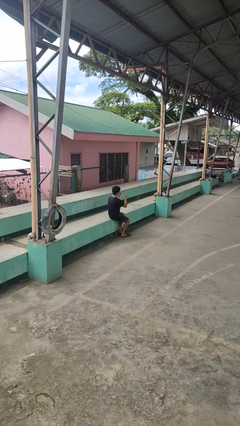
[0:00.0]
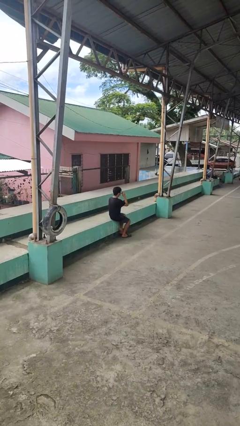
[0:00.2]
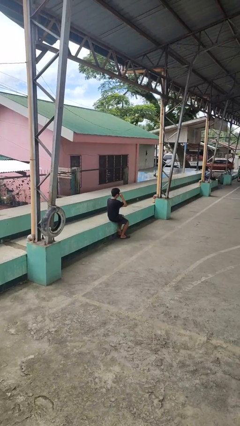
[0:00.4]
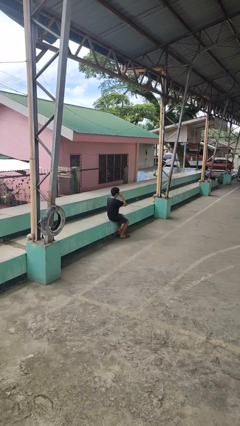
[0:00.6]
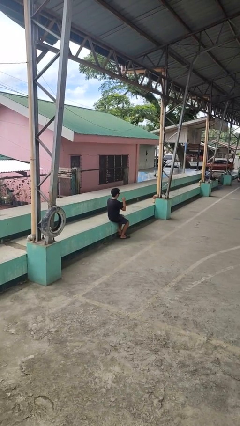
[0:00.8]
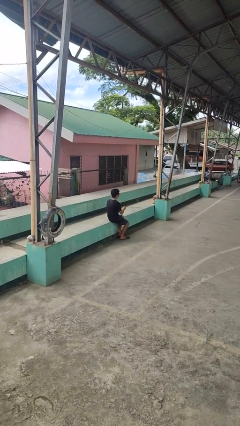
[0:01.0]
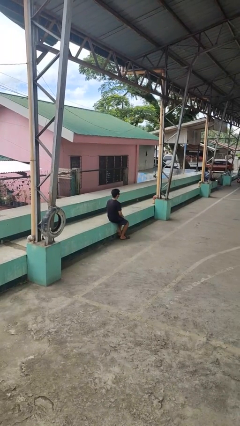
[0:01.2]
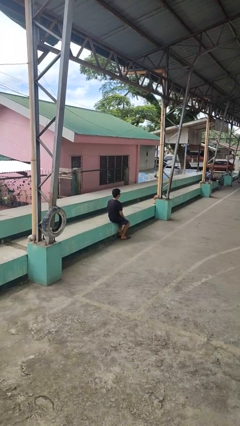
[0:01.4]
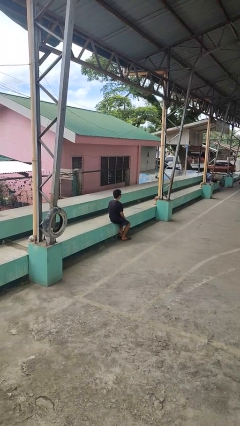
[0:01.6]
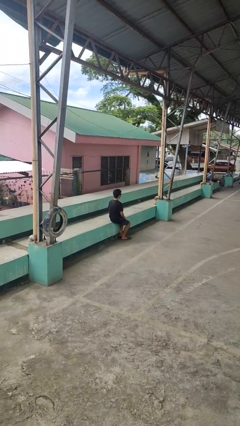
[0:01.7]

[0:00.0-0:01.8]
person puts on sunglasses

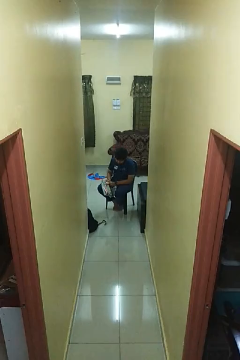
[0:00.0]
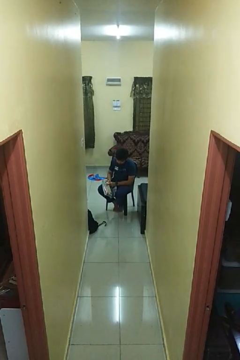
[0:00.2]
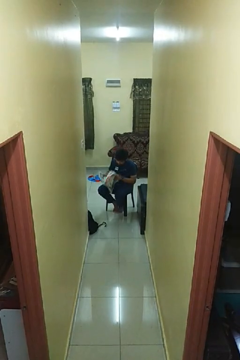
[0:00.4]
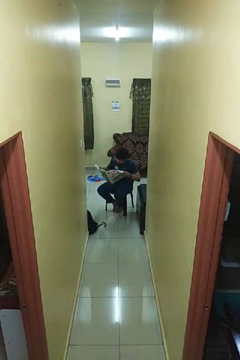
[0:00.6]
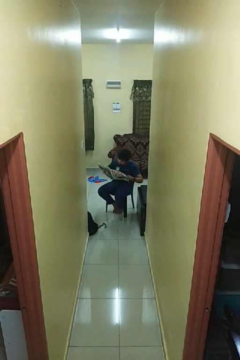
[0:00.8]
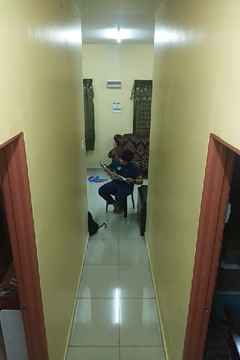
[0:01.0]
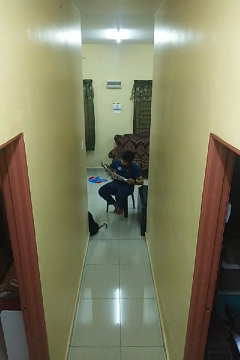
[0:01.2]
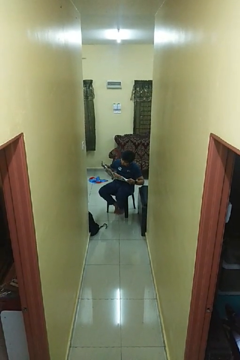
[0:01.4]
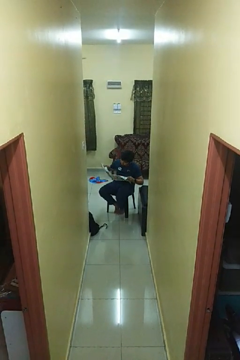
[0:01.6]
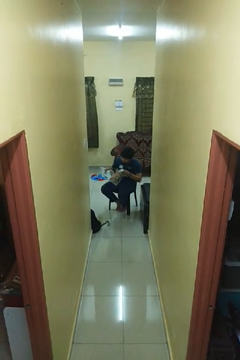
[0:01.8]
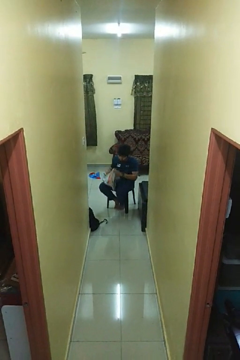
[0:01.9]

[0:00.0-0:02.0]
person reads newspaper

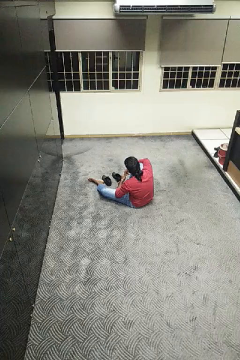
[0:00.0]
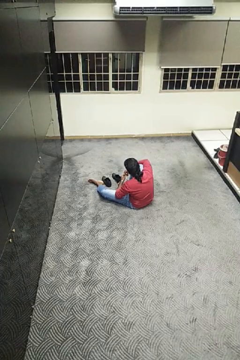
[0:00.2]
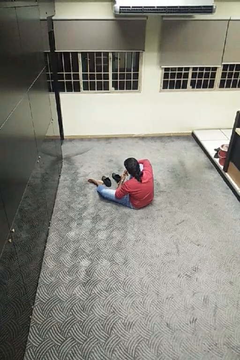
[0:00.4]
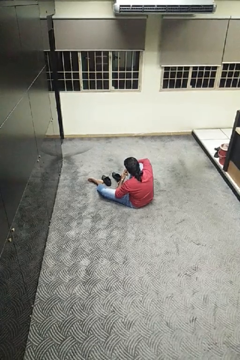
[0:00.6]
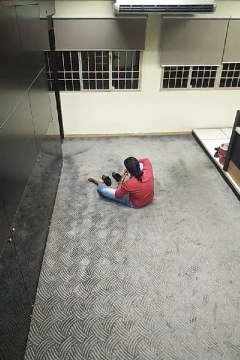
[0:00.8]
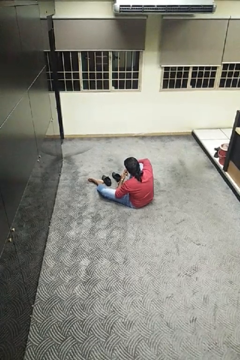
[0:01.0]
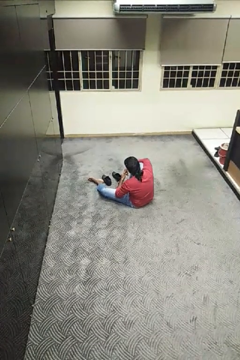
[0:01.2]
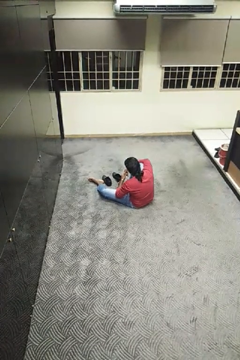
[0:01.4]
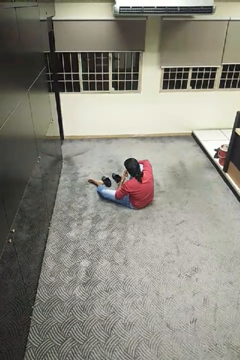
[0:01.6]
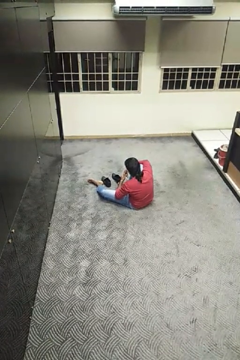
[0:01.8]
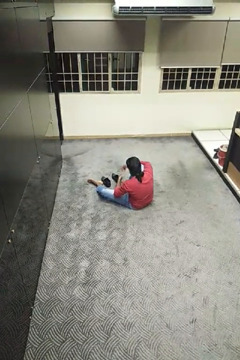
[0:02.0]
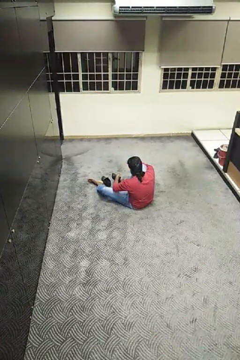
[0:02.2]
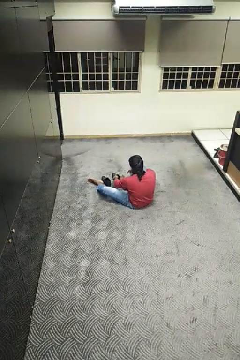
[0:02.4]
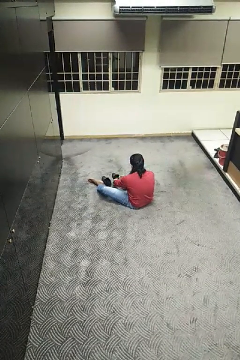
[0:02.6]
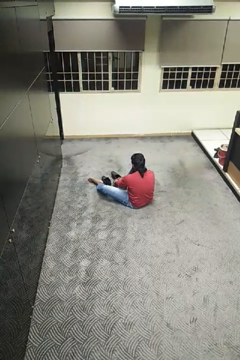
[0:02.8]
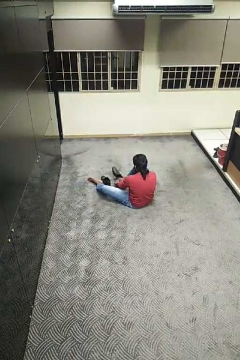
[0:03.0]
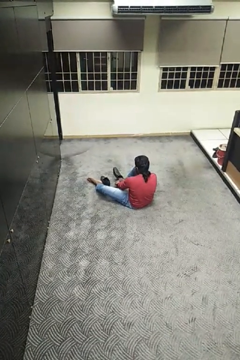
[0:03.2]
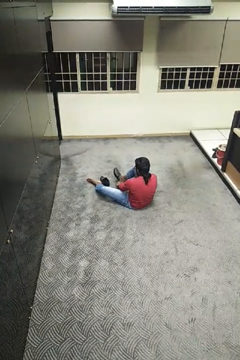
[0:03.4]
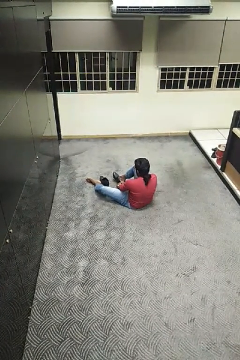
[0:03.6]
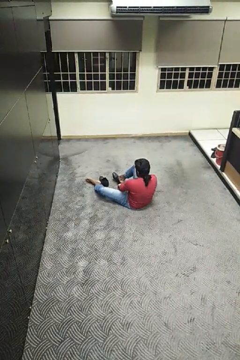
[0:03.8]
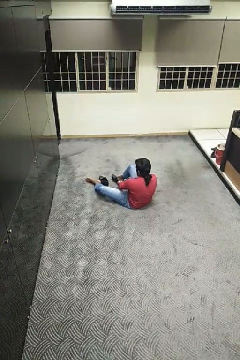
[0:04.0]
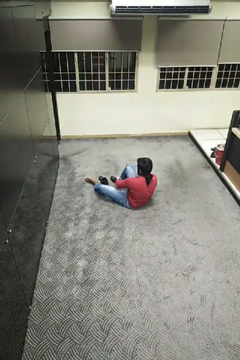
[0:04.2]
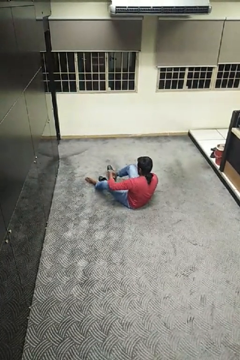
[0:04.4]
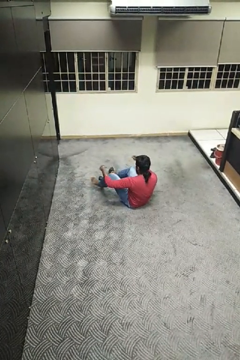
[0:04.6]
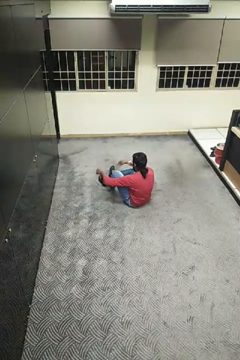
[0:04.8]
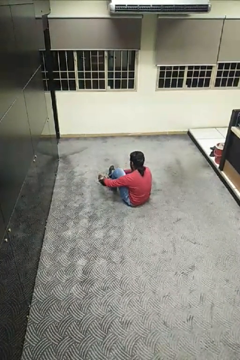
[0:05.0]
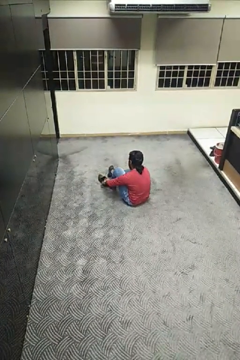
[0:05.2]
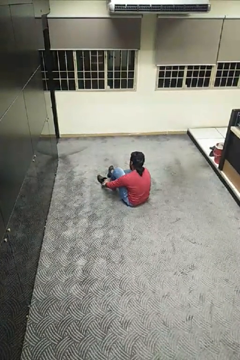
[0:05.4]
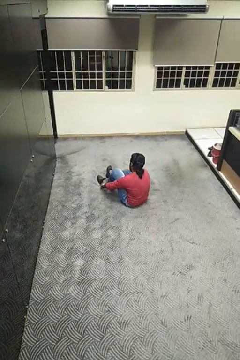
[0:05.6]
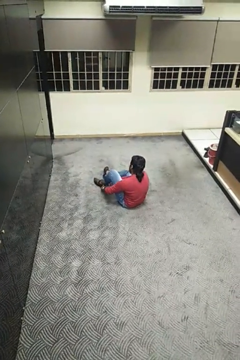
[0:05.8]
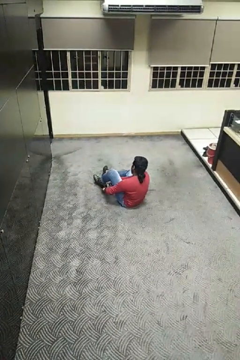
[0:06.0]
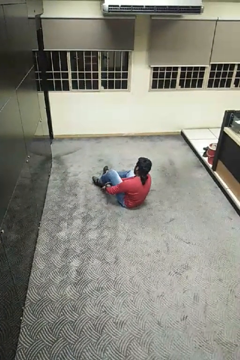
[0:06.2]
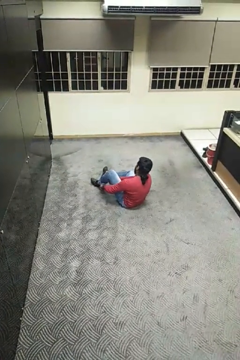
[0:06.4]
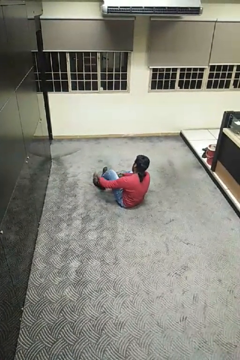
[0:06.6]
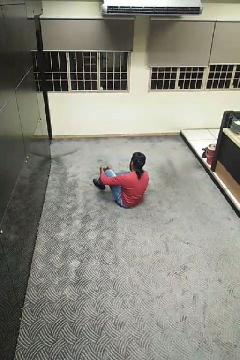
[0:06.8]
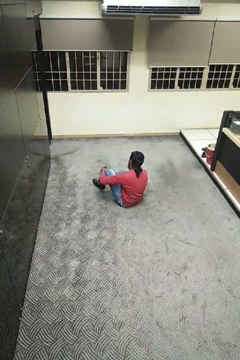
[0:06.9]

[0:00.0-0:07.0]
person puts on shoes

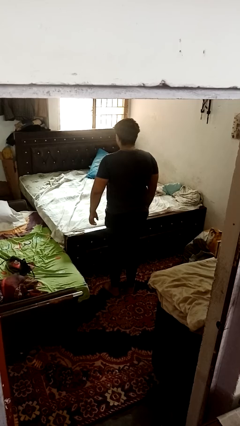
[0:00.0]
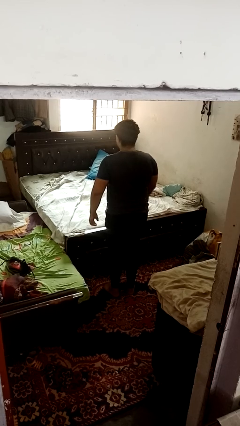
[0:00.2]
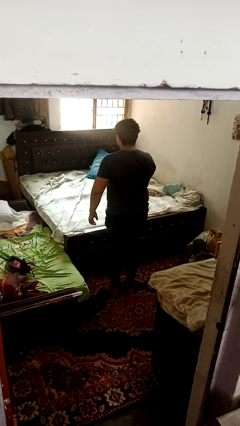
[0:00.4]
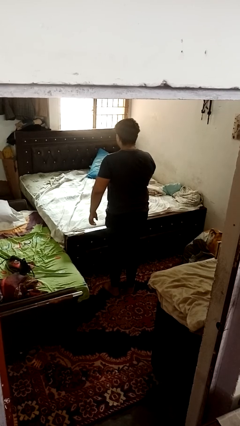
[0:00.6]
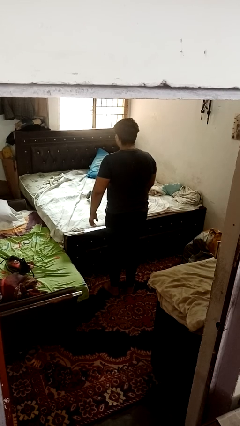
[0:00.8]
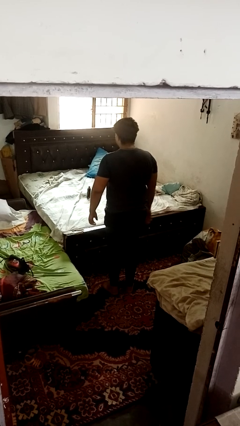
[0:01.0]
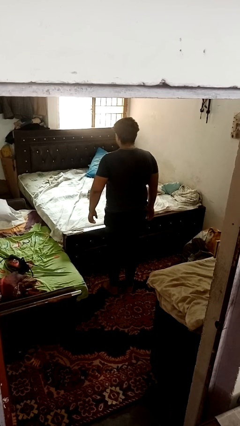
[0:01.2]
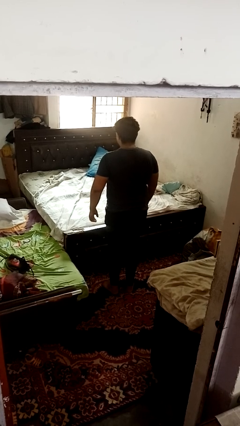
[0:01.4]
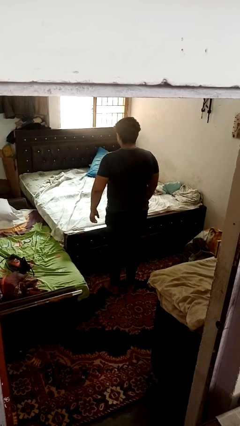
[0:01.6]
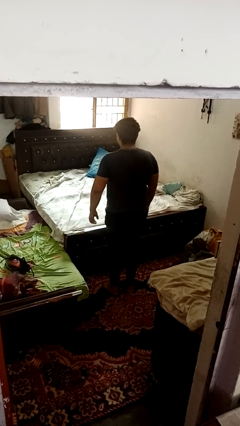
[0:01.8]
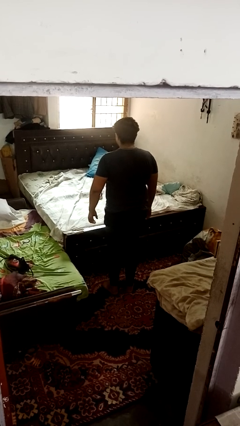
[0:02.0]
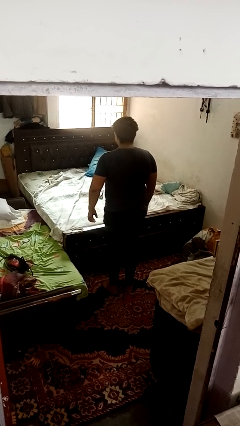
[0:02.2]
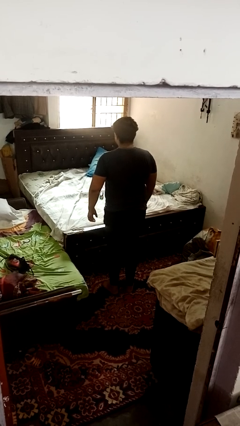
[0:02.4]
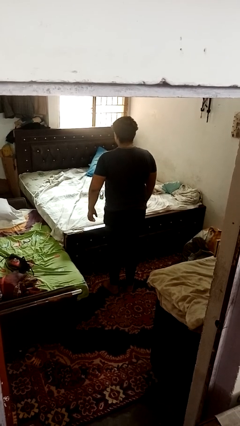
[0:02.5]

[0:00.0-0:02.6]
person throws object on bed

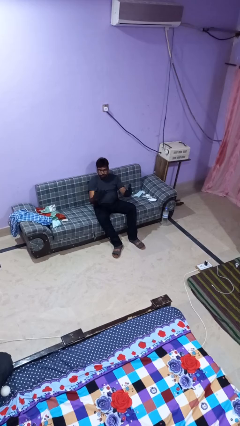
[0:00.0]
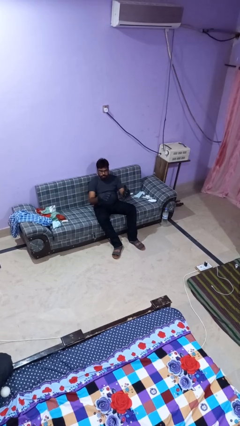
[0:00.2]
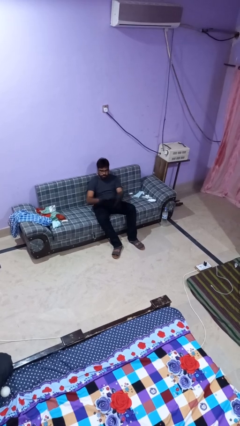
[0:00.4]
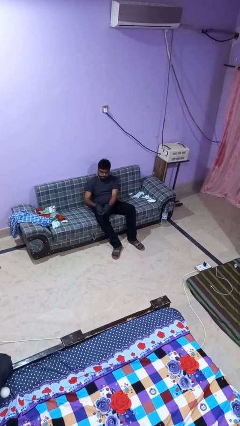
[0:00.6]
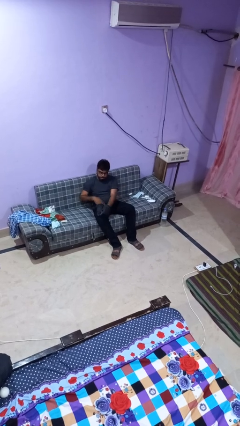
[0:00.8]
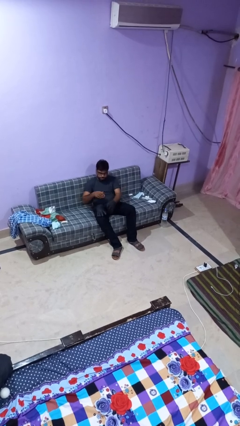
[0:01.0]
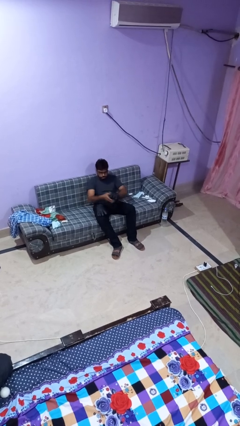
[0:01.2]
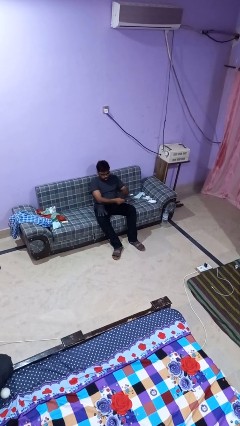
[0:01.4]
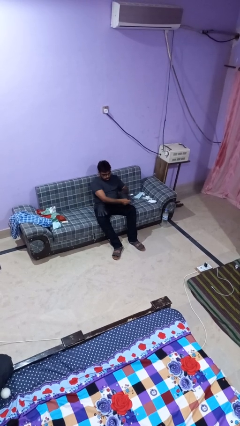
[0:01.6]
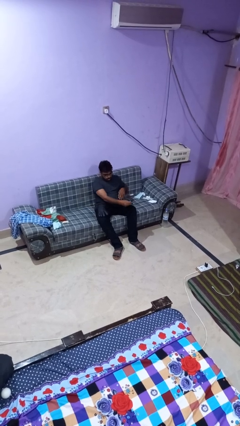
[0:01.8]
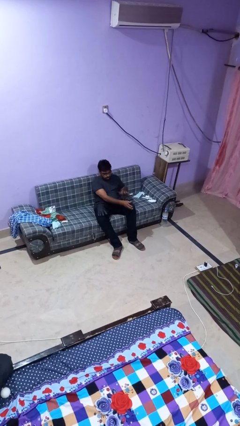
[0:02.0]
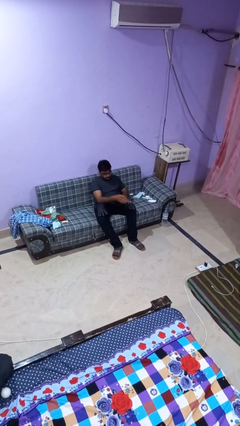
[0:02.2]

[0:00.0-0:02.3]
person takes off gloves

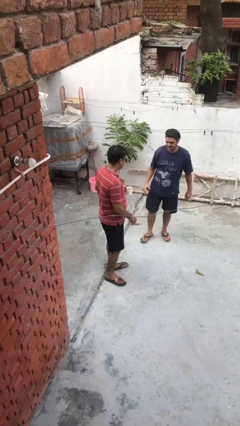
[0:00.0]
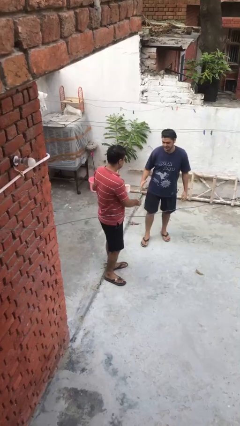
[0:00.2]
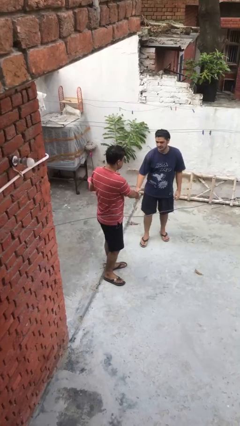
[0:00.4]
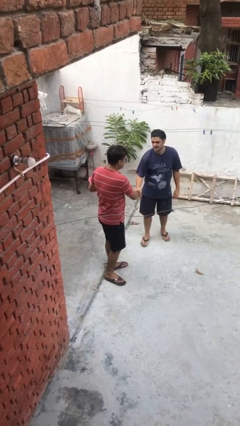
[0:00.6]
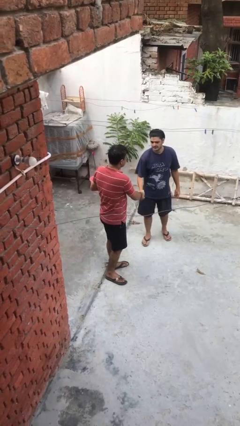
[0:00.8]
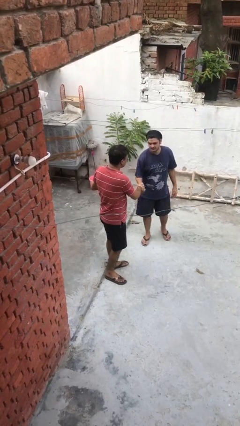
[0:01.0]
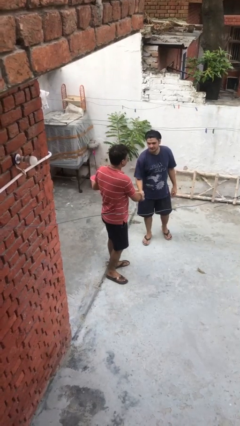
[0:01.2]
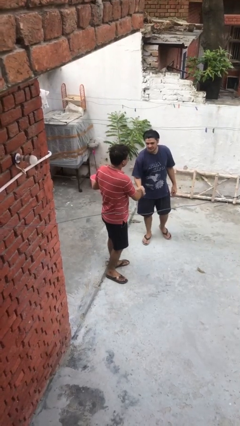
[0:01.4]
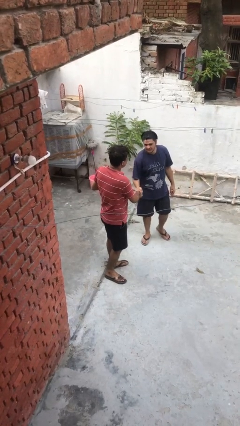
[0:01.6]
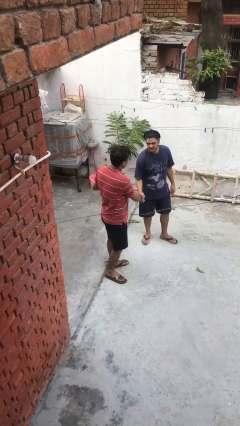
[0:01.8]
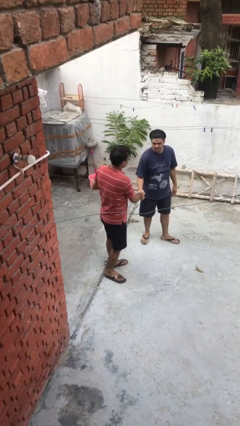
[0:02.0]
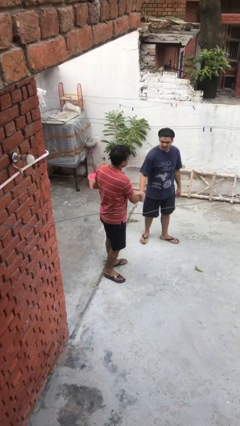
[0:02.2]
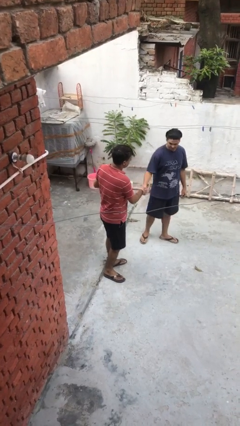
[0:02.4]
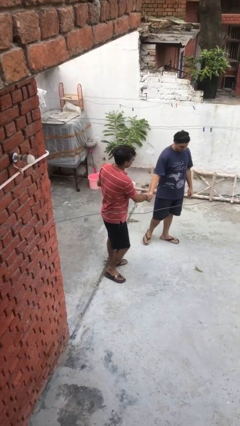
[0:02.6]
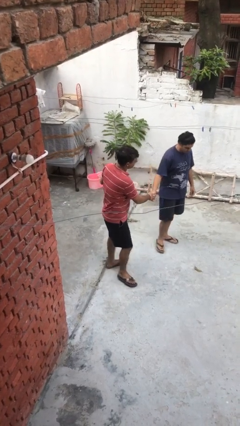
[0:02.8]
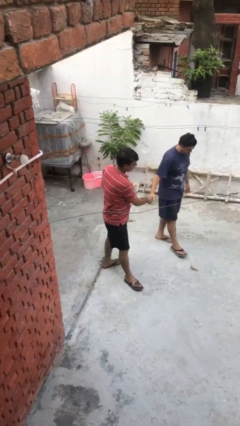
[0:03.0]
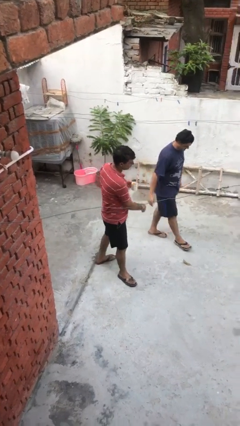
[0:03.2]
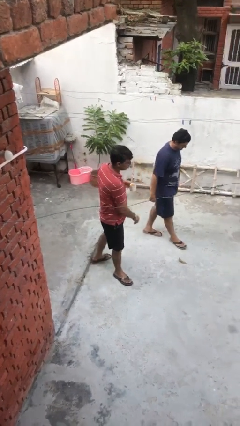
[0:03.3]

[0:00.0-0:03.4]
person shakes hand
